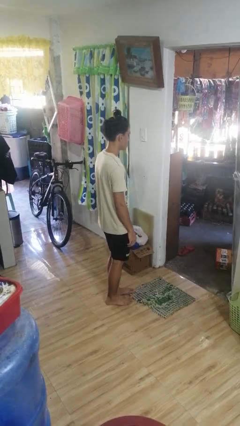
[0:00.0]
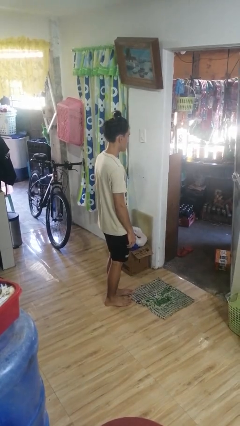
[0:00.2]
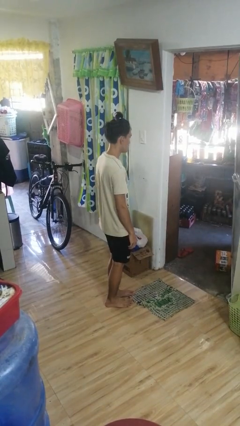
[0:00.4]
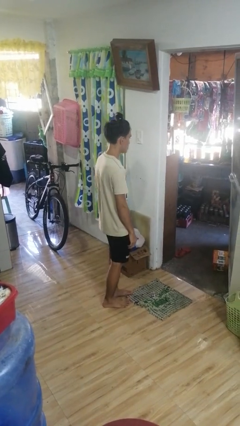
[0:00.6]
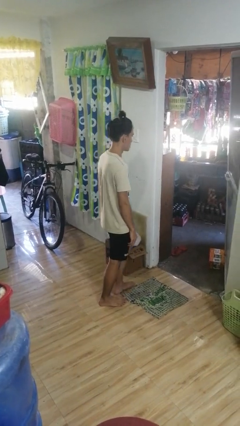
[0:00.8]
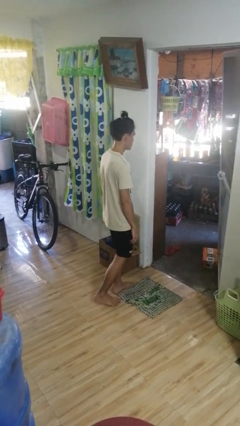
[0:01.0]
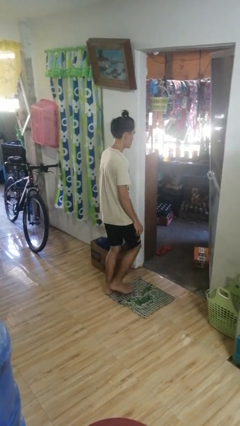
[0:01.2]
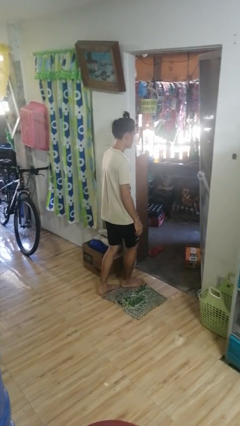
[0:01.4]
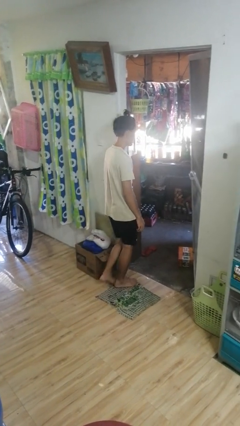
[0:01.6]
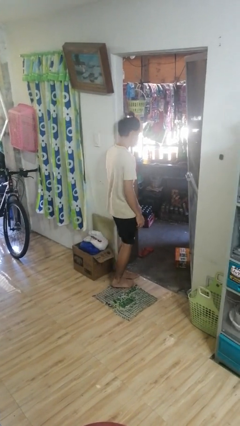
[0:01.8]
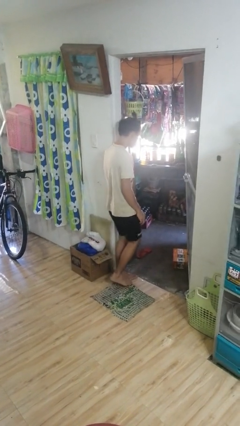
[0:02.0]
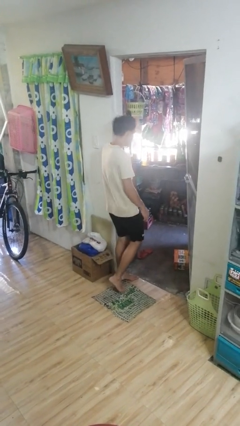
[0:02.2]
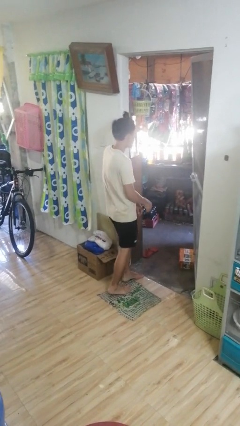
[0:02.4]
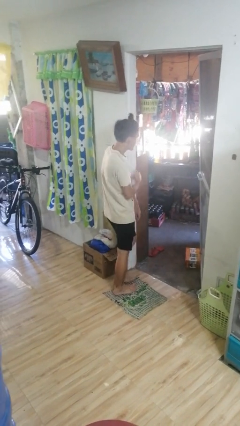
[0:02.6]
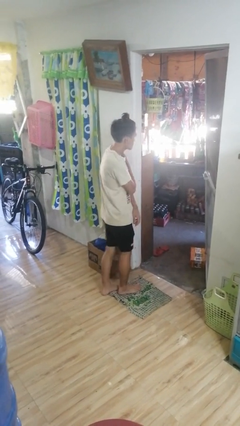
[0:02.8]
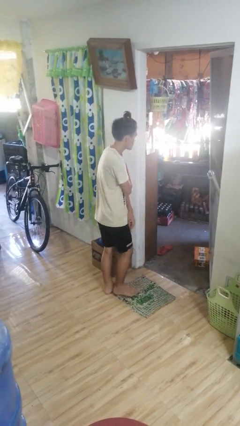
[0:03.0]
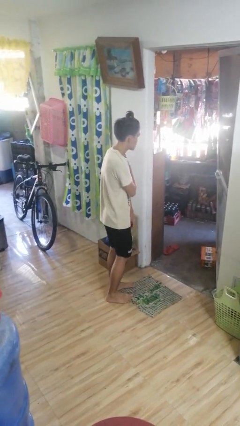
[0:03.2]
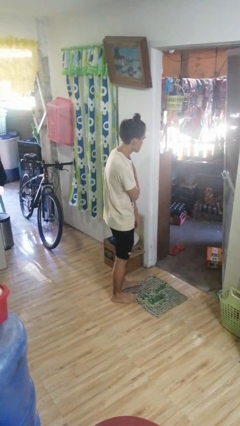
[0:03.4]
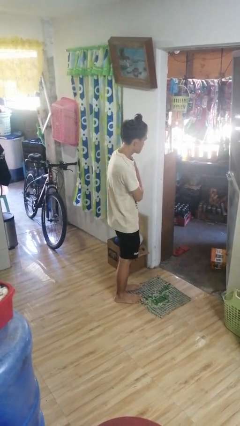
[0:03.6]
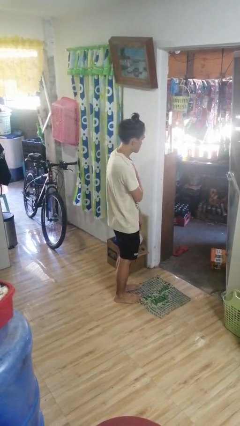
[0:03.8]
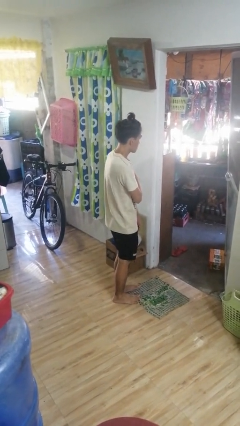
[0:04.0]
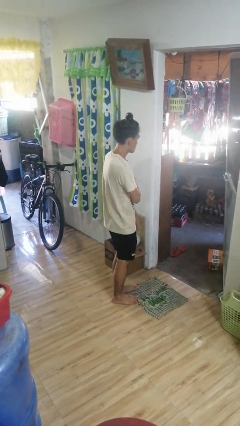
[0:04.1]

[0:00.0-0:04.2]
person bumps into wall

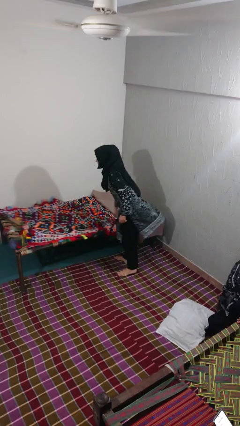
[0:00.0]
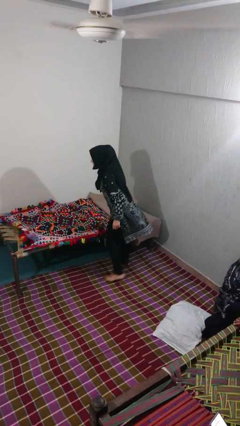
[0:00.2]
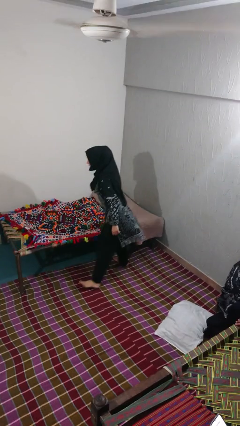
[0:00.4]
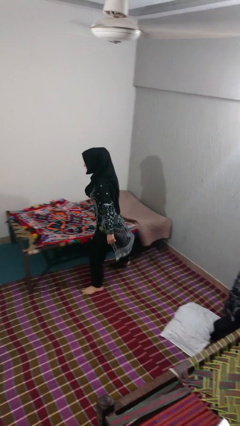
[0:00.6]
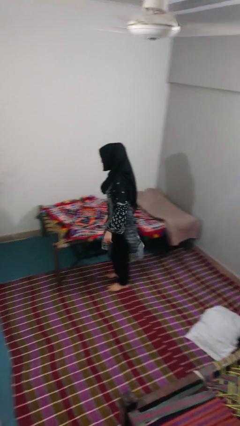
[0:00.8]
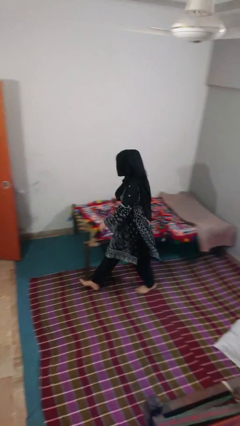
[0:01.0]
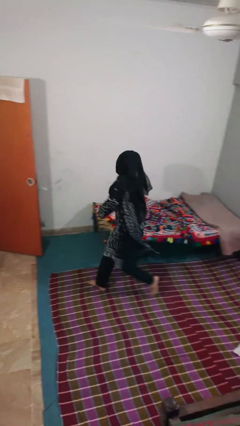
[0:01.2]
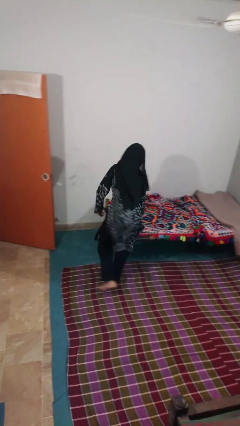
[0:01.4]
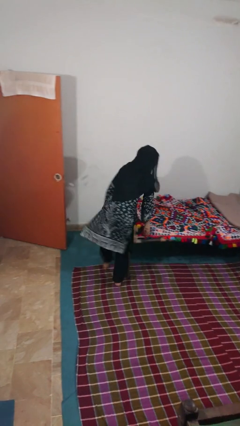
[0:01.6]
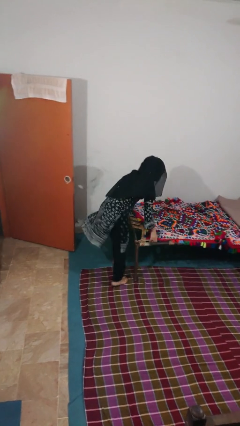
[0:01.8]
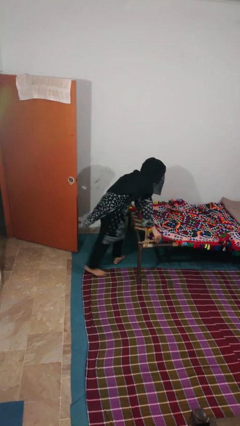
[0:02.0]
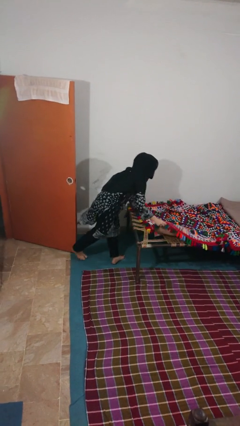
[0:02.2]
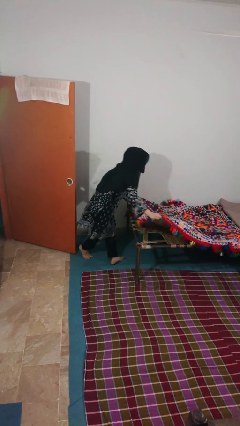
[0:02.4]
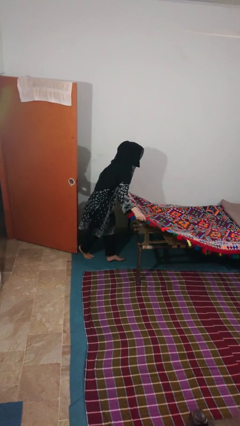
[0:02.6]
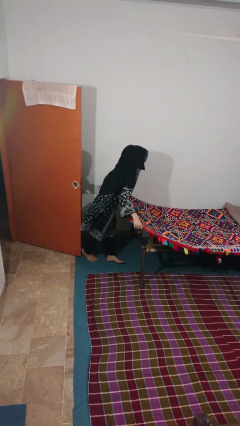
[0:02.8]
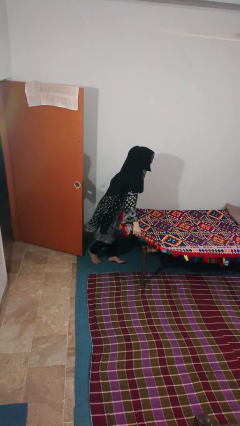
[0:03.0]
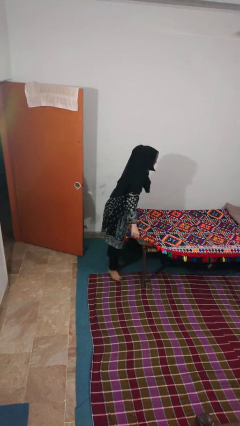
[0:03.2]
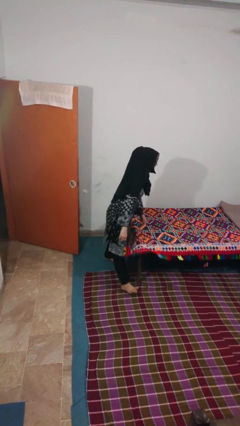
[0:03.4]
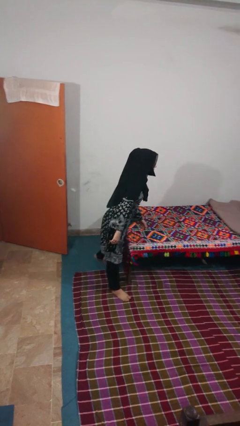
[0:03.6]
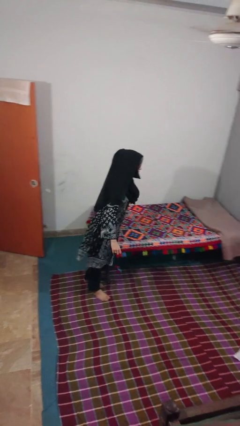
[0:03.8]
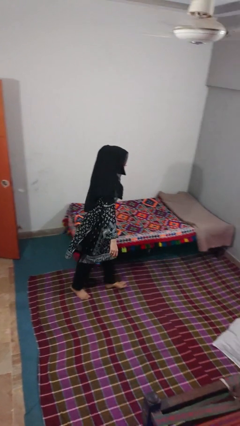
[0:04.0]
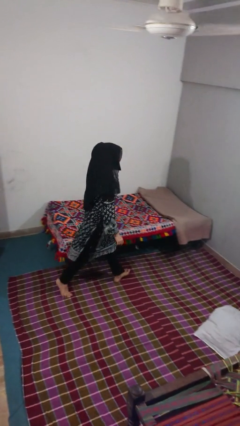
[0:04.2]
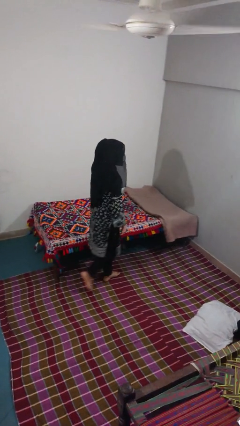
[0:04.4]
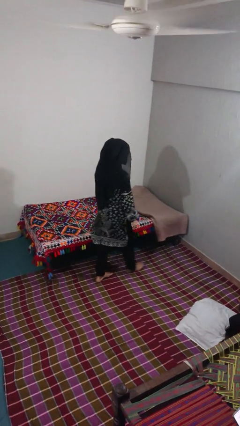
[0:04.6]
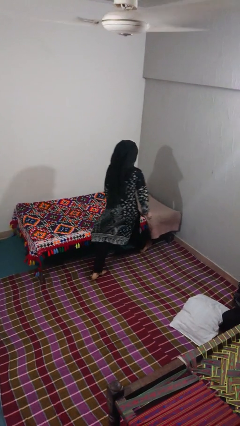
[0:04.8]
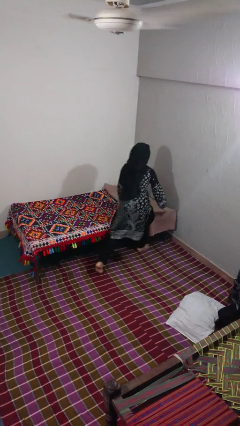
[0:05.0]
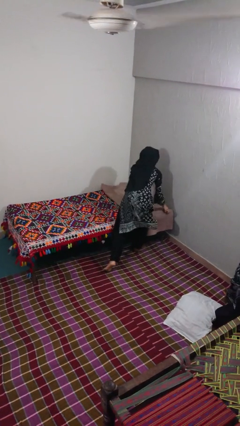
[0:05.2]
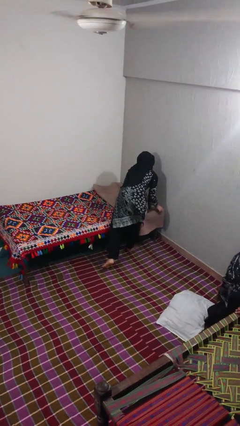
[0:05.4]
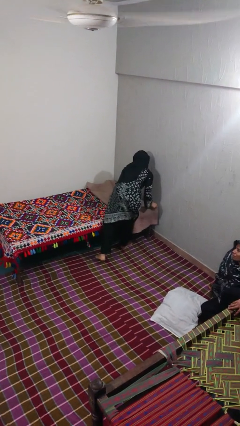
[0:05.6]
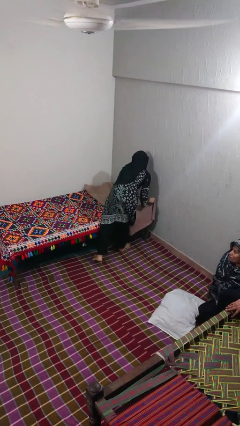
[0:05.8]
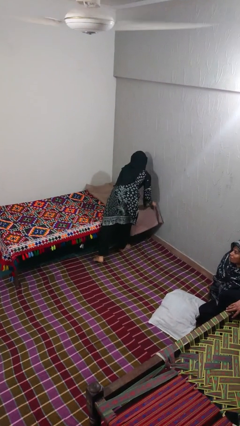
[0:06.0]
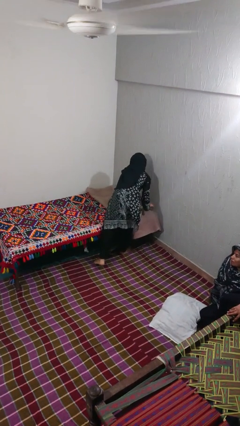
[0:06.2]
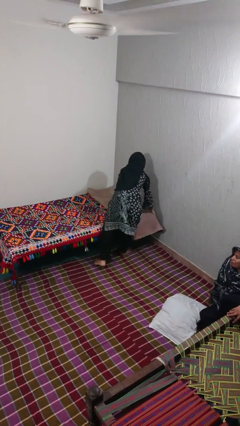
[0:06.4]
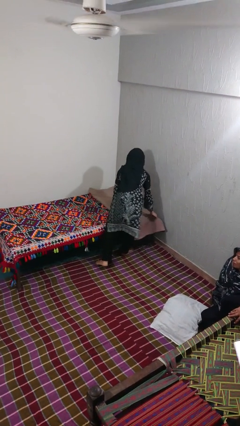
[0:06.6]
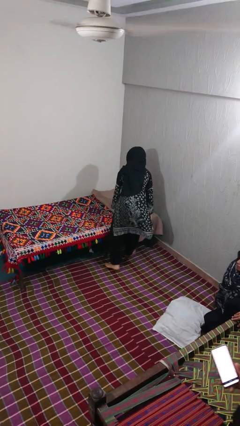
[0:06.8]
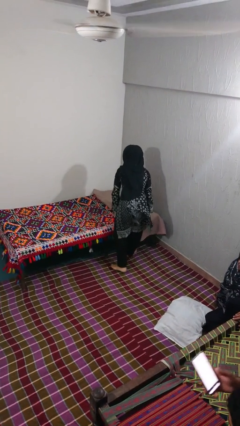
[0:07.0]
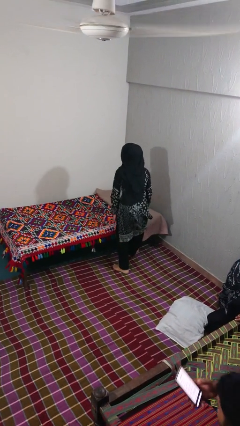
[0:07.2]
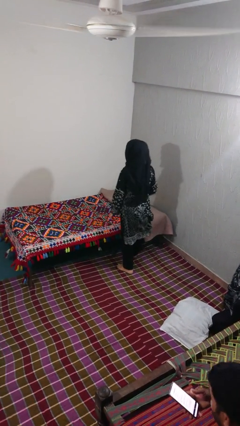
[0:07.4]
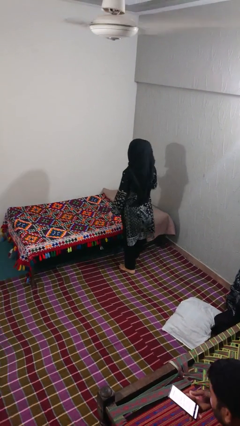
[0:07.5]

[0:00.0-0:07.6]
person makes bed

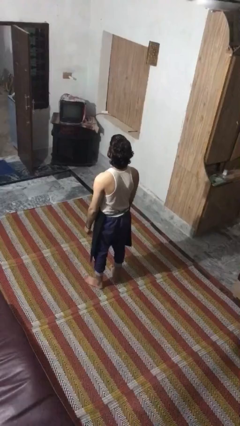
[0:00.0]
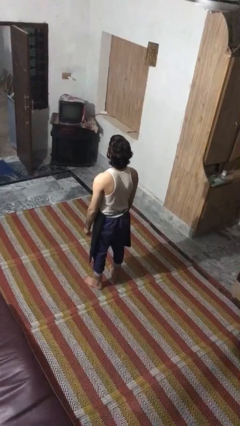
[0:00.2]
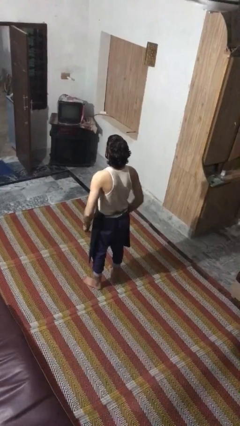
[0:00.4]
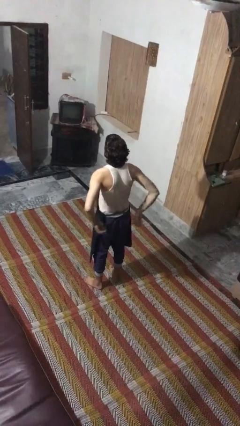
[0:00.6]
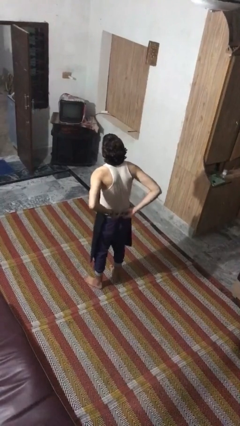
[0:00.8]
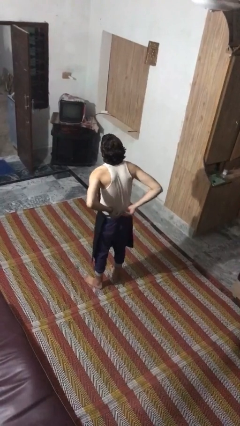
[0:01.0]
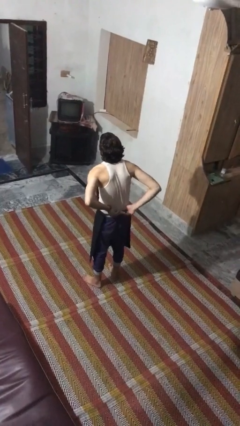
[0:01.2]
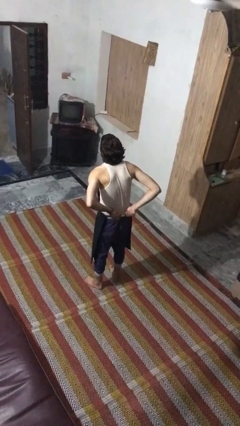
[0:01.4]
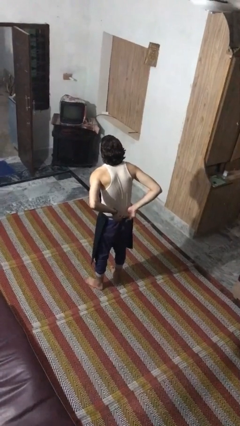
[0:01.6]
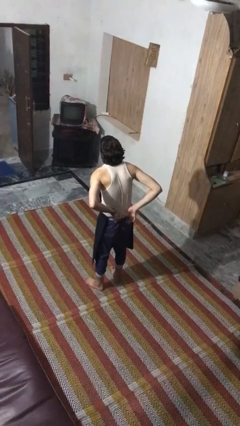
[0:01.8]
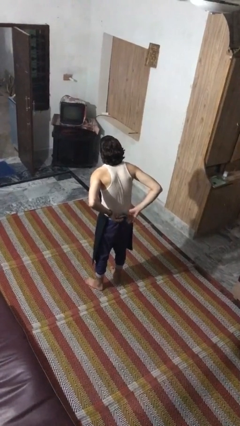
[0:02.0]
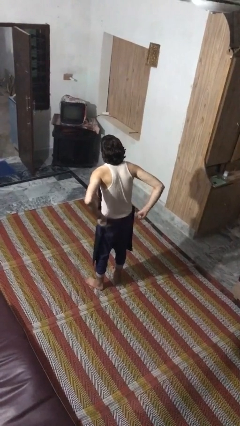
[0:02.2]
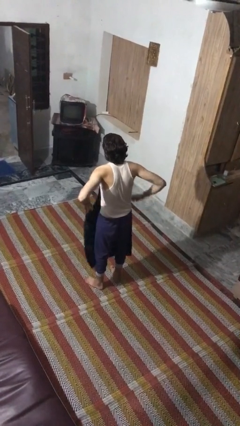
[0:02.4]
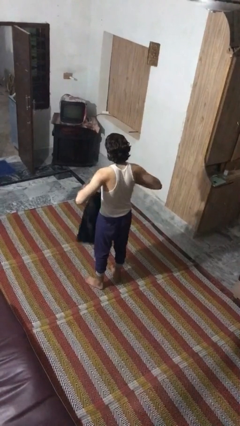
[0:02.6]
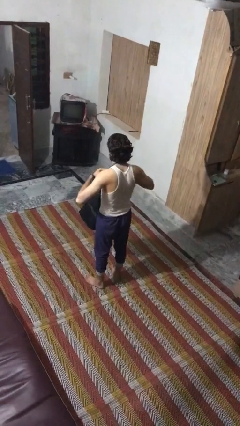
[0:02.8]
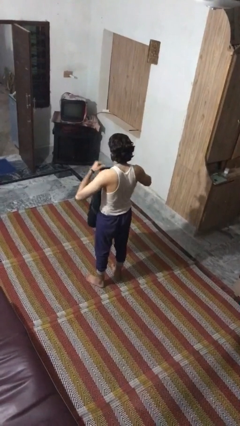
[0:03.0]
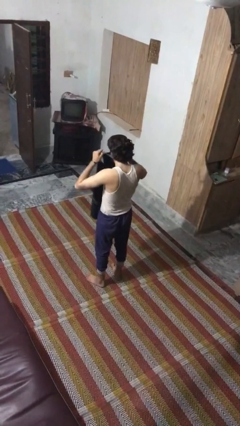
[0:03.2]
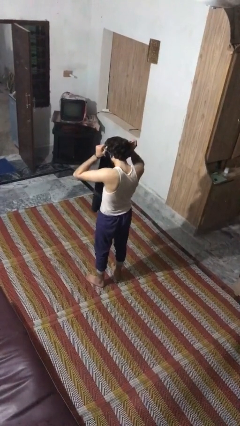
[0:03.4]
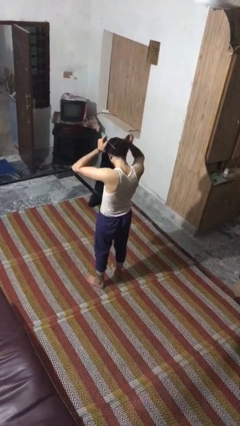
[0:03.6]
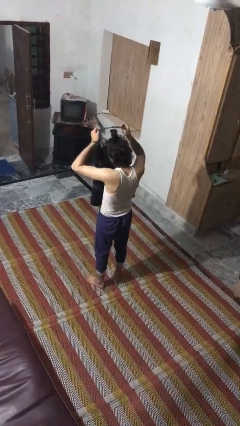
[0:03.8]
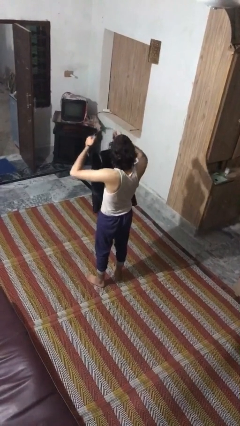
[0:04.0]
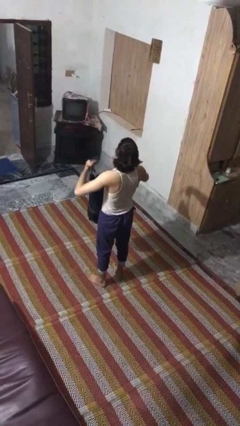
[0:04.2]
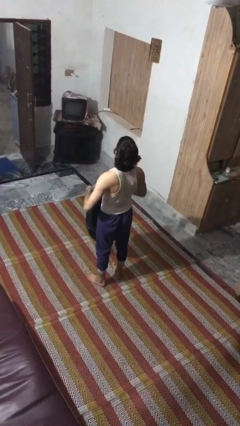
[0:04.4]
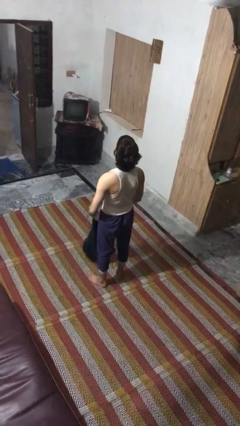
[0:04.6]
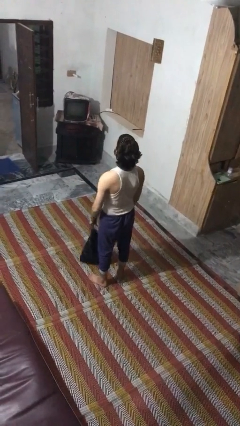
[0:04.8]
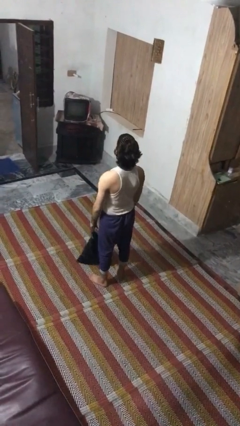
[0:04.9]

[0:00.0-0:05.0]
person takes off apron

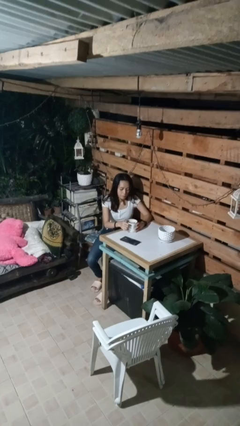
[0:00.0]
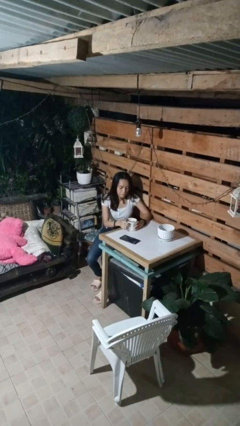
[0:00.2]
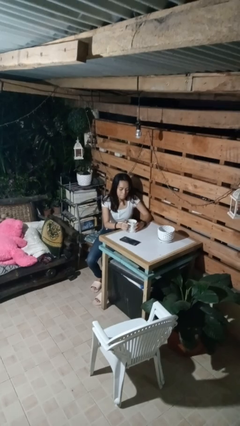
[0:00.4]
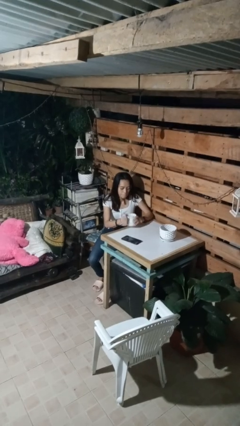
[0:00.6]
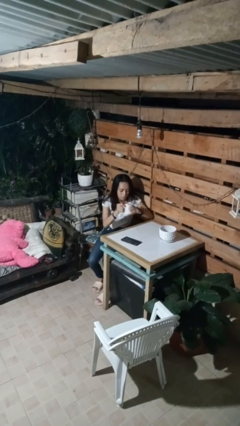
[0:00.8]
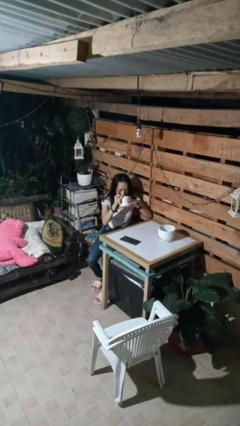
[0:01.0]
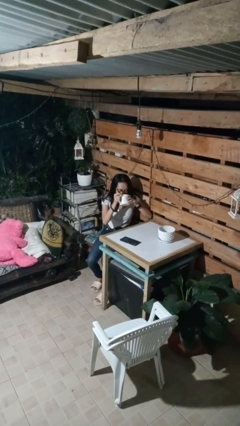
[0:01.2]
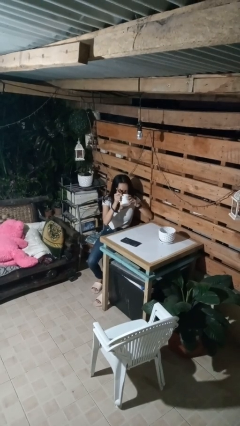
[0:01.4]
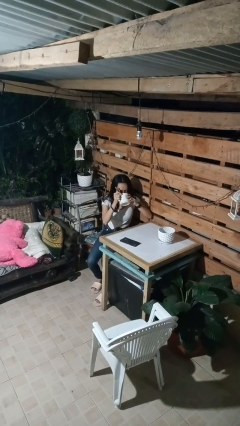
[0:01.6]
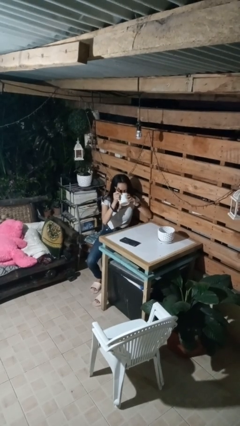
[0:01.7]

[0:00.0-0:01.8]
person drinks from mug
